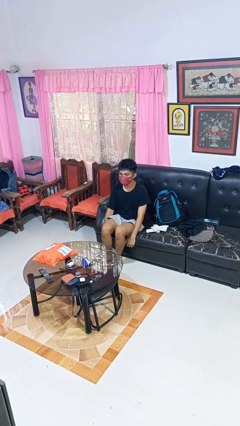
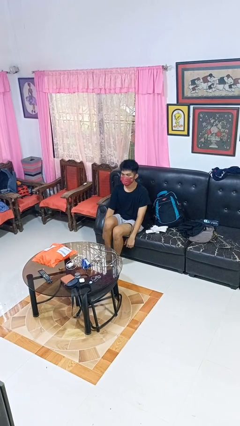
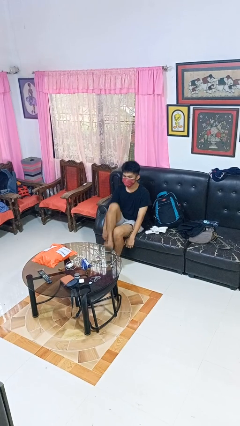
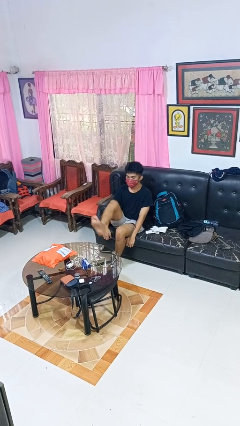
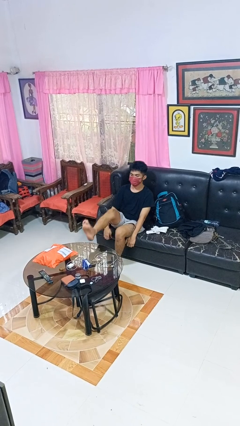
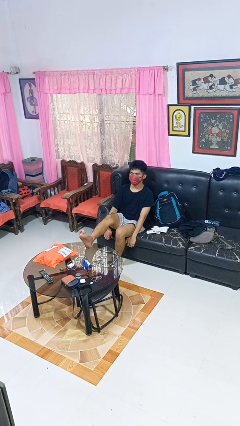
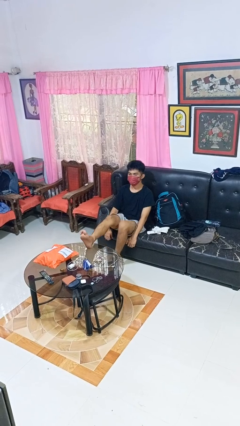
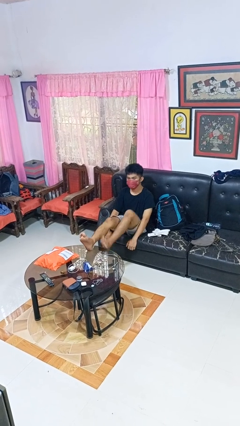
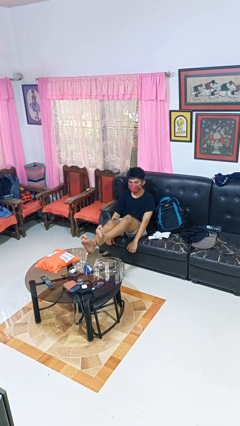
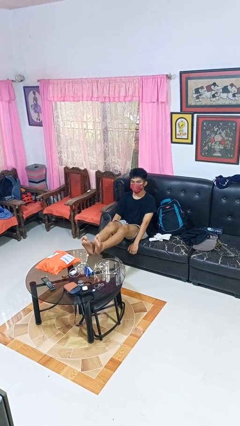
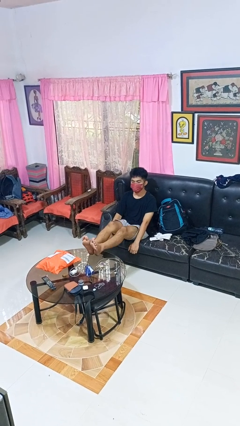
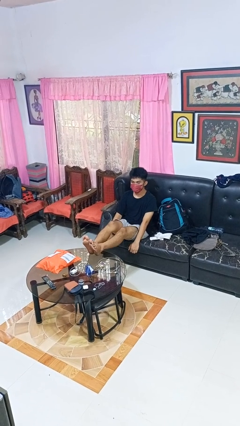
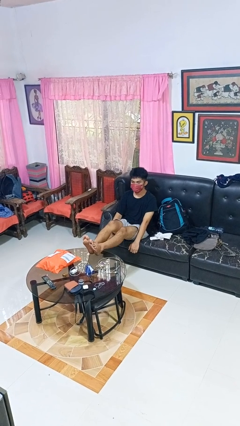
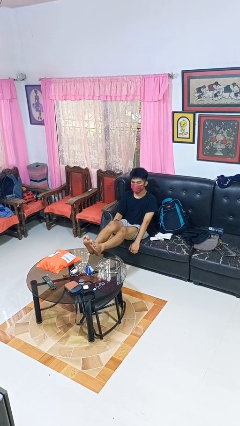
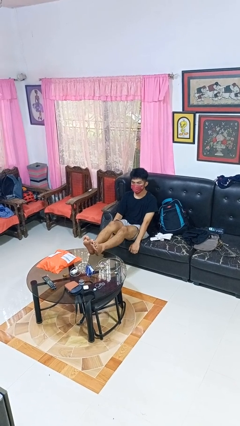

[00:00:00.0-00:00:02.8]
person puts feet up

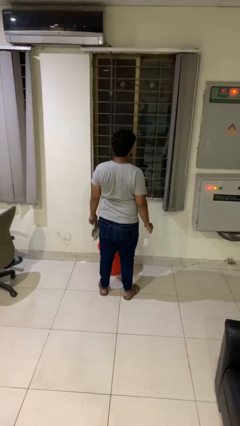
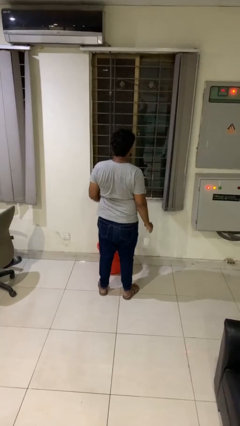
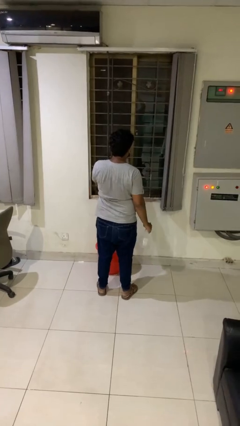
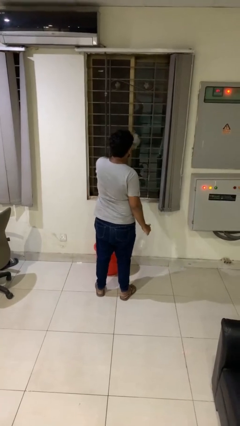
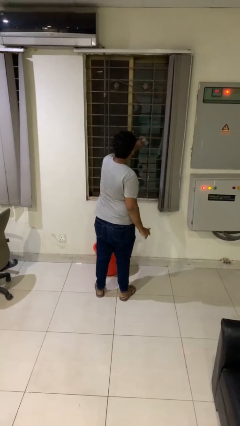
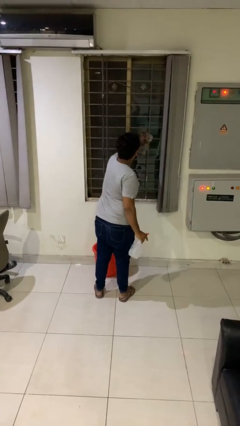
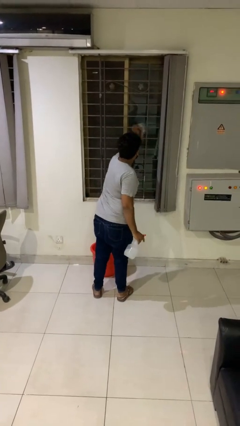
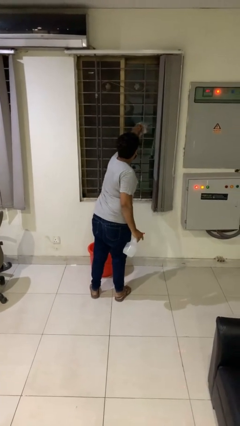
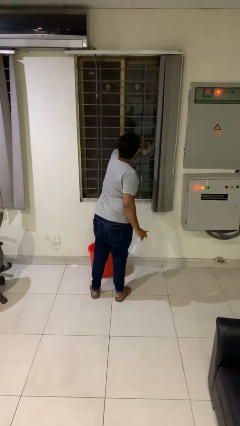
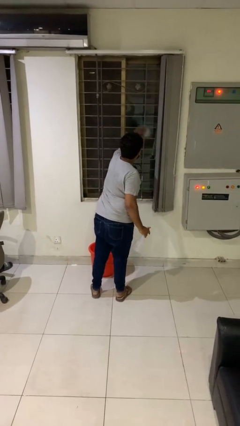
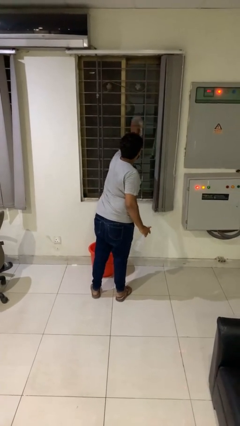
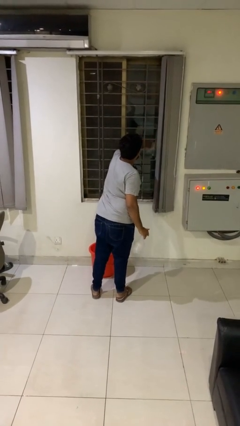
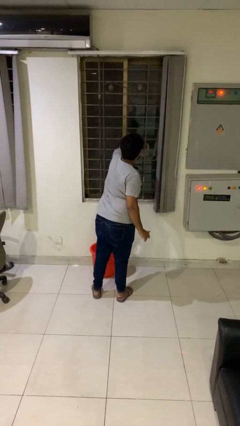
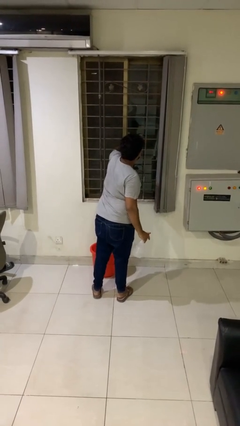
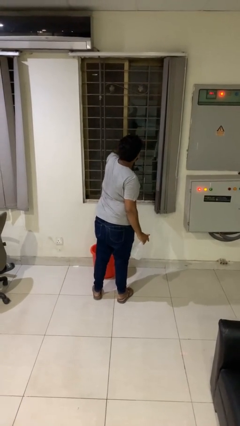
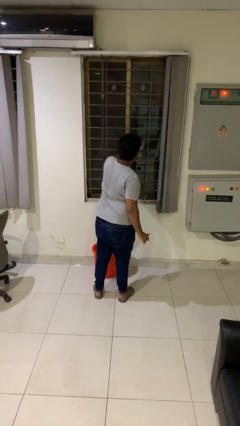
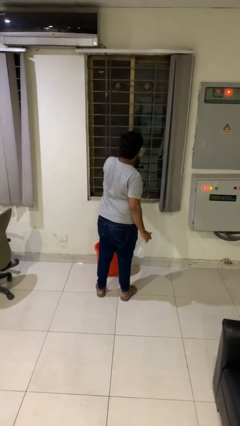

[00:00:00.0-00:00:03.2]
person washes window

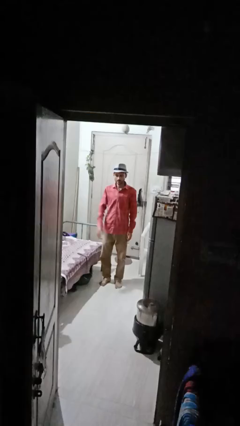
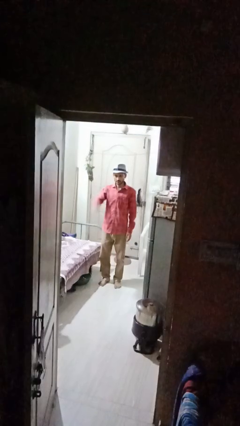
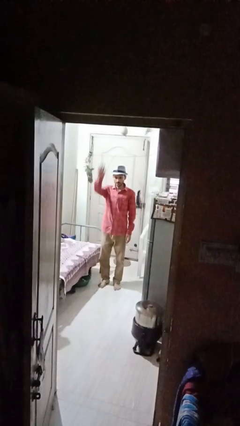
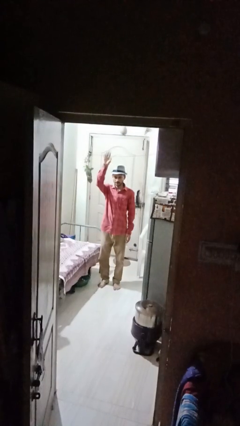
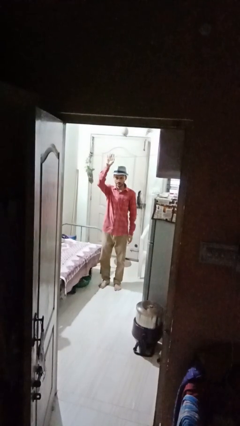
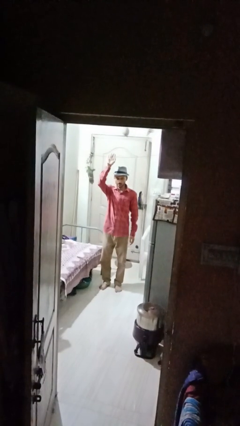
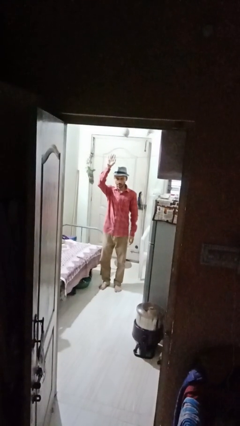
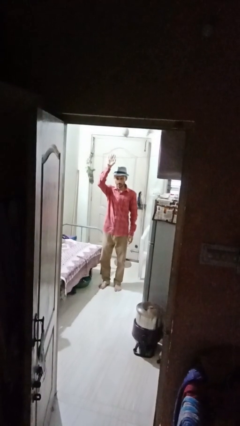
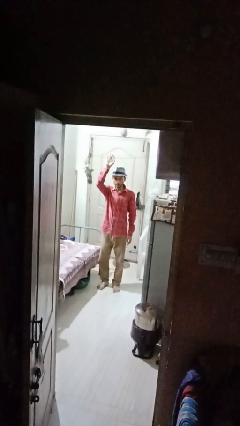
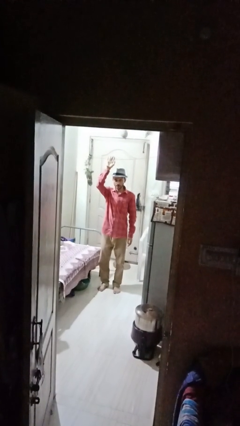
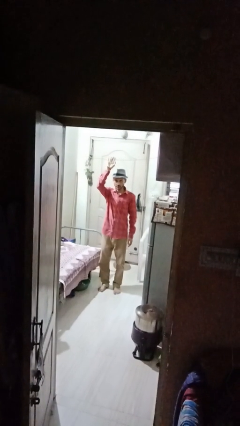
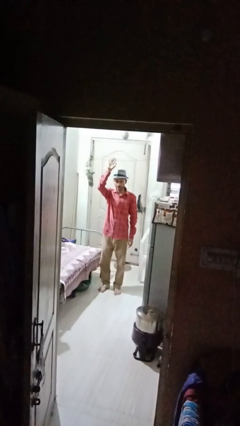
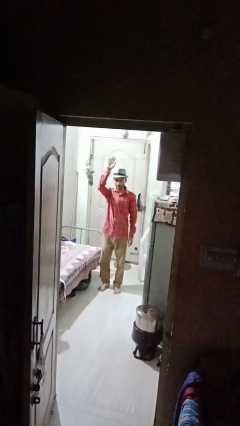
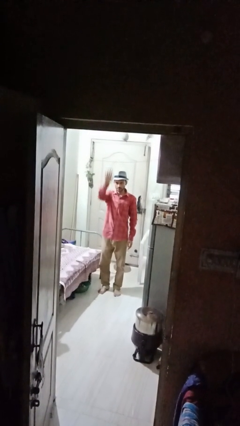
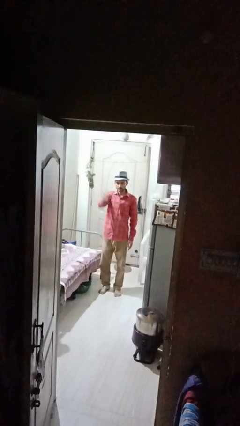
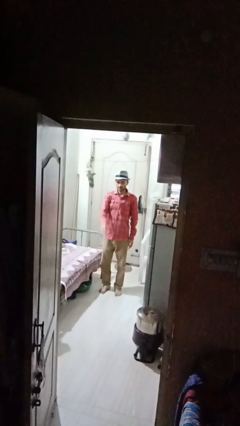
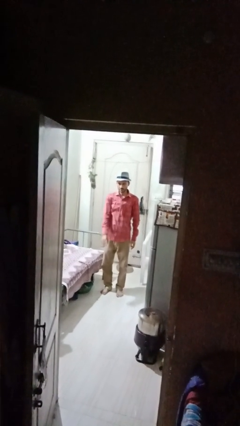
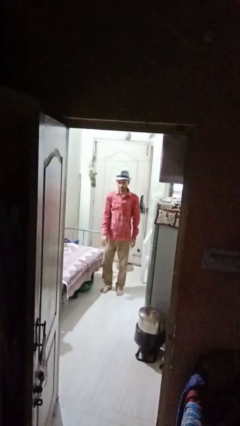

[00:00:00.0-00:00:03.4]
person gestures raise hand

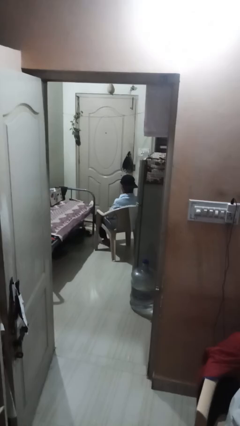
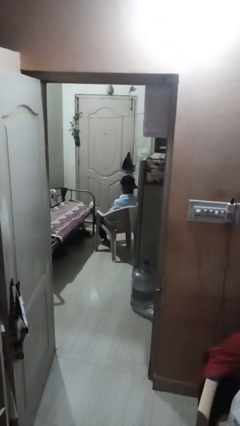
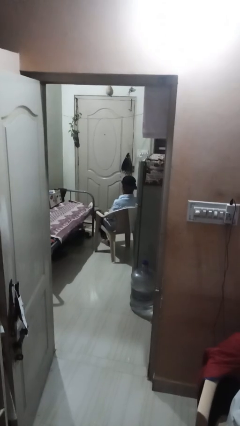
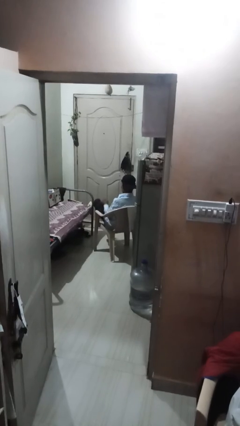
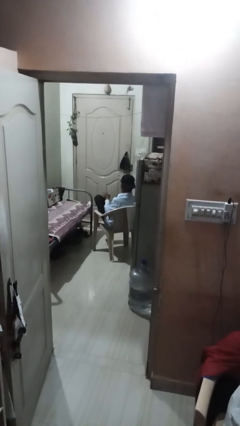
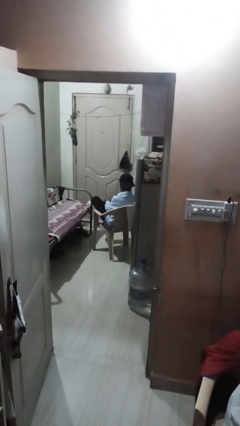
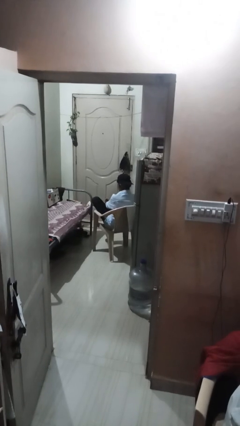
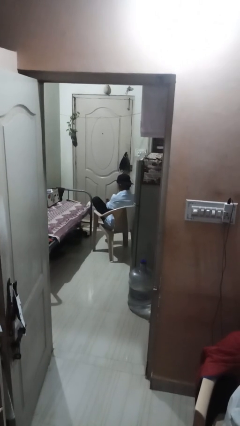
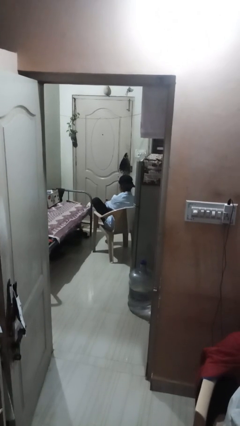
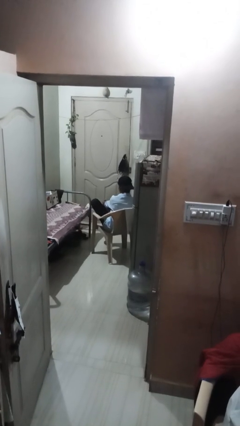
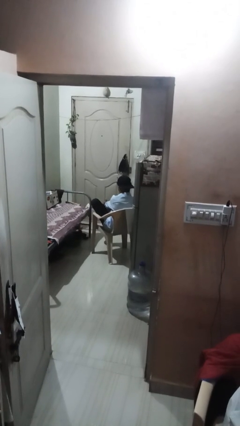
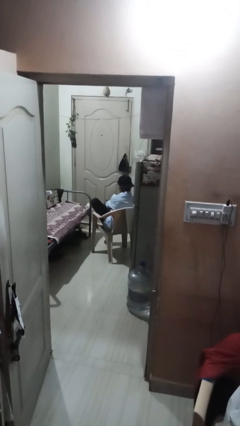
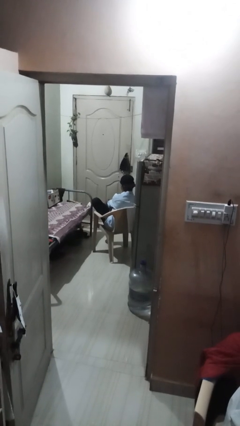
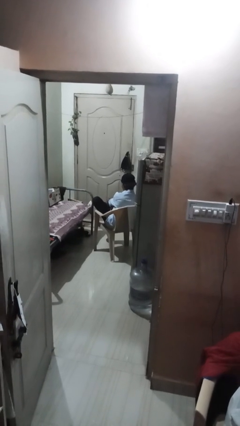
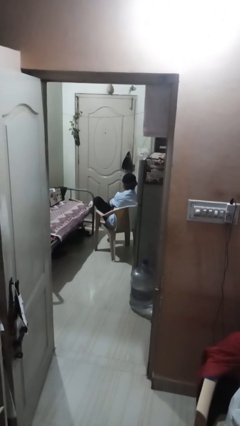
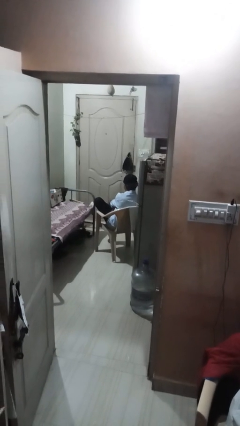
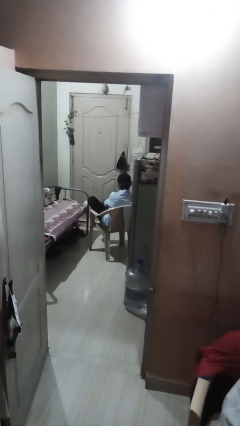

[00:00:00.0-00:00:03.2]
person rubs foot

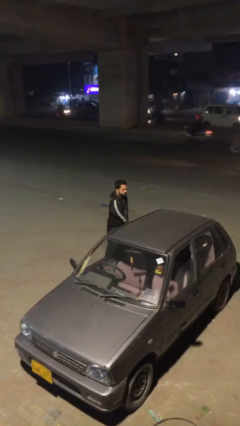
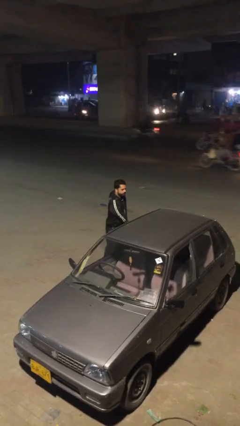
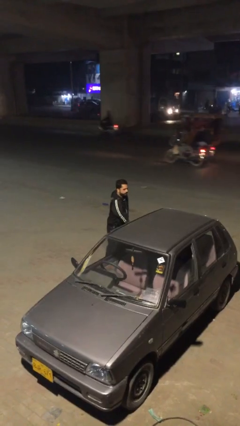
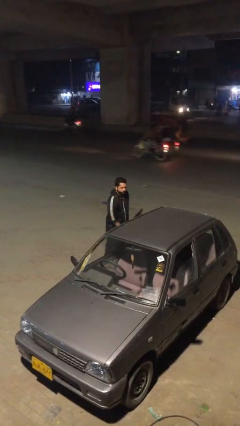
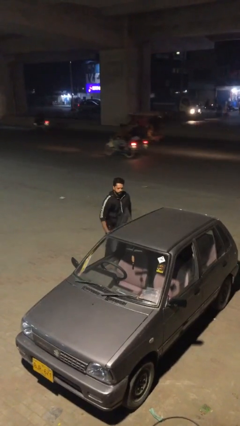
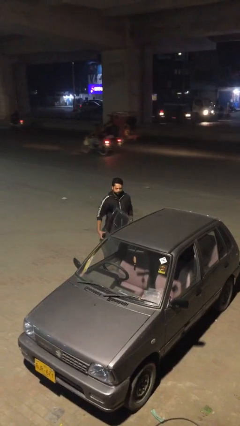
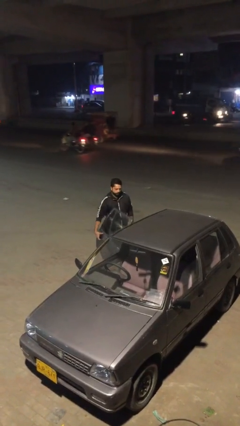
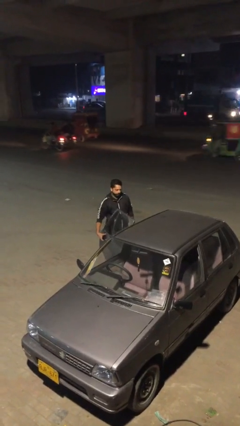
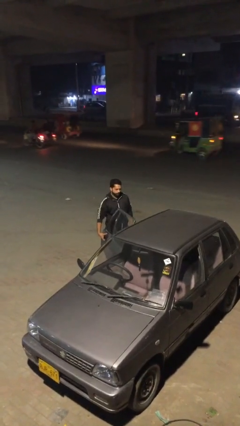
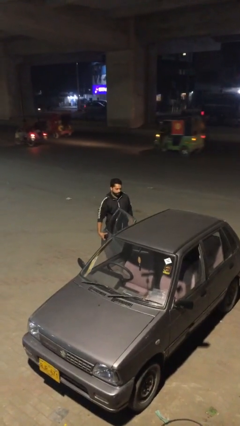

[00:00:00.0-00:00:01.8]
person opens car door

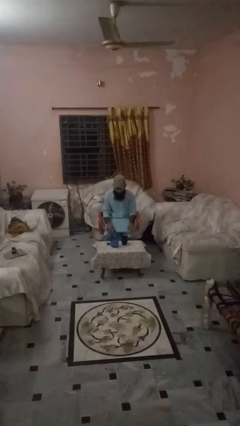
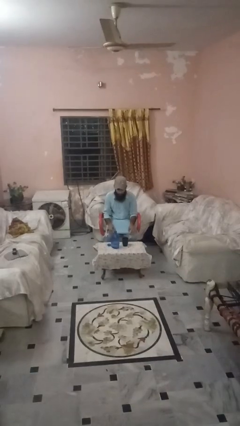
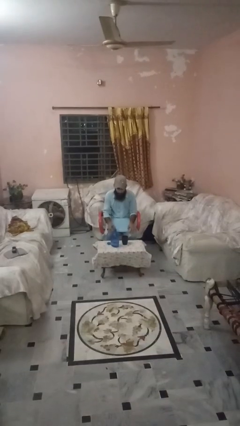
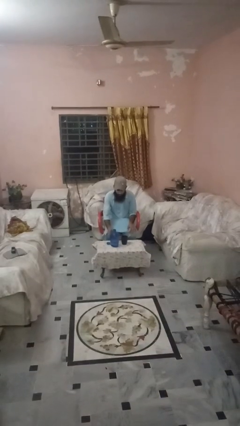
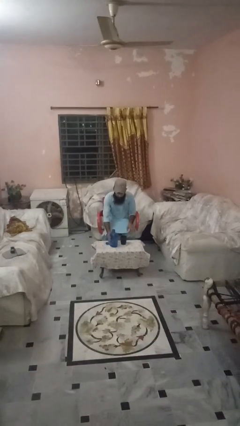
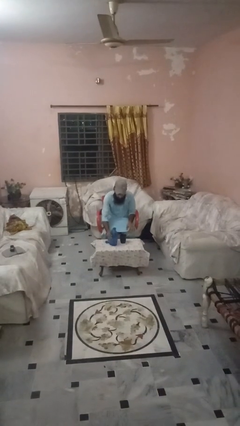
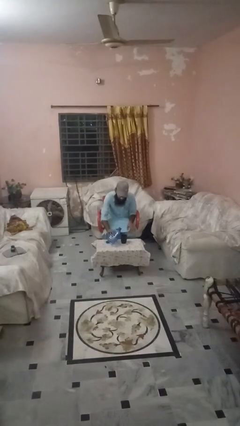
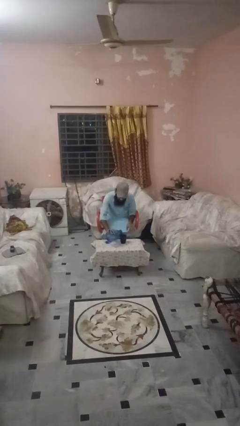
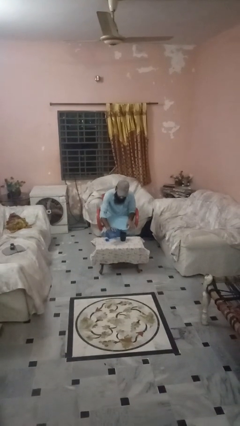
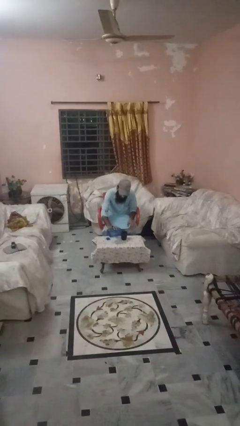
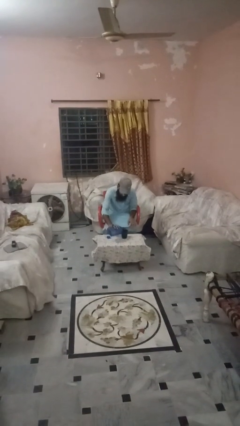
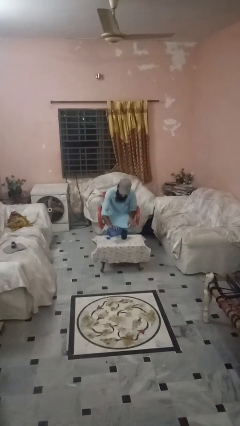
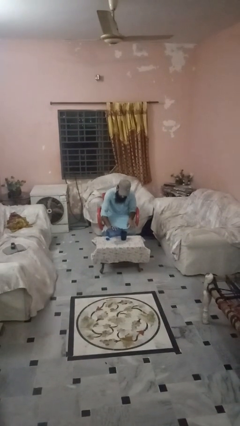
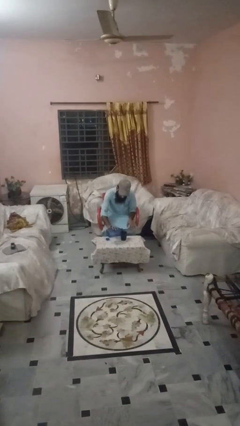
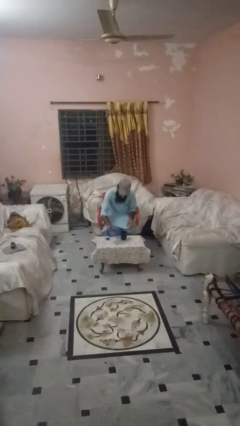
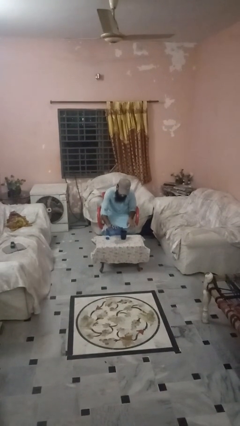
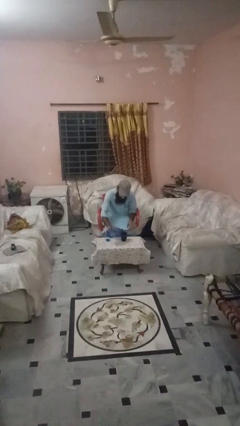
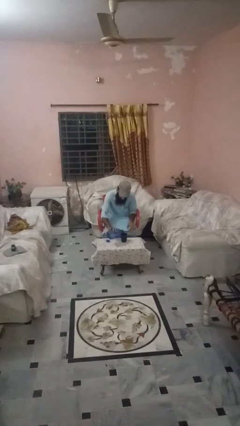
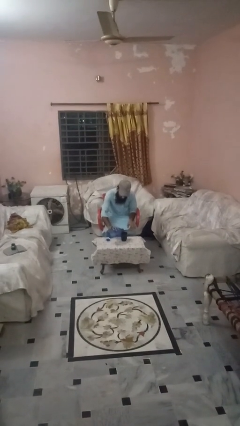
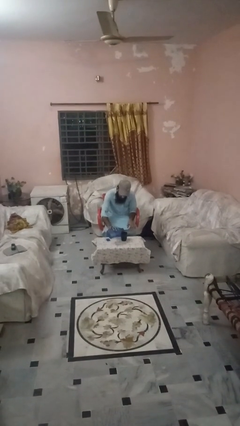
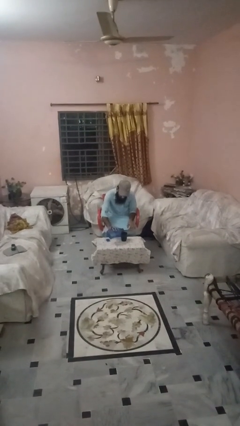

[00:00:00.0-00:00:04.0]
person pours liquid into cup
